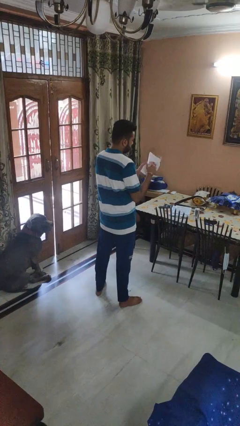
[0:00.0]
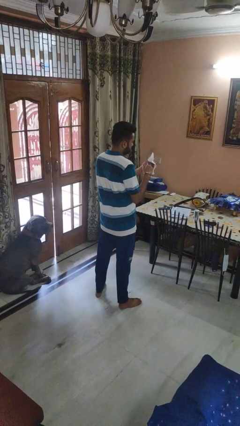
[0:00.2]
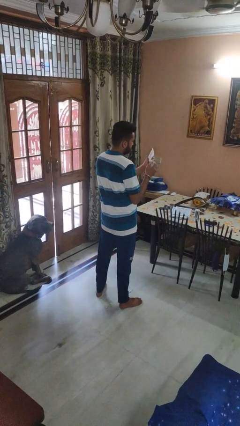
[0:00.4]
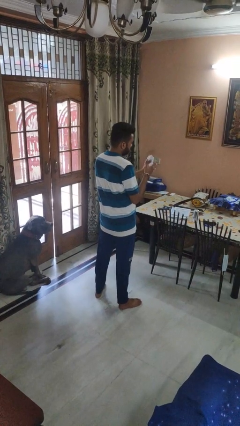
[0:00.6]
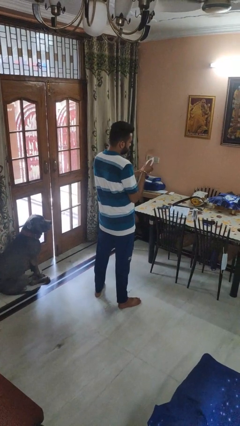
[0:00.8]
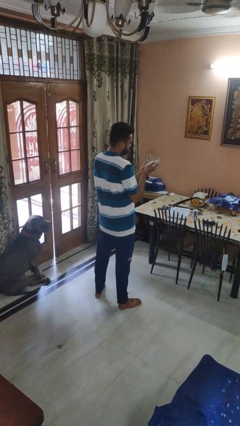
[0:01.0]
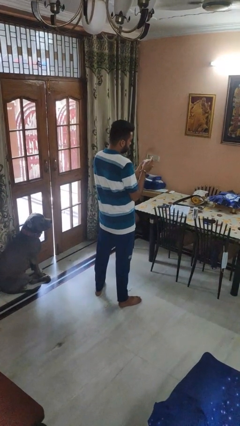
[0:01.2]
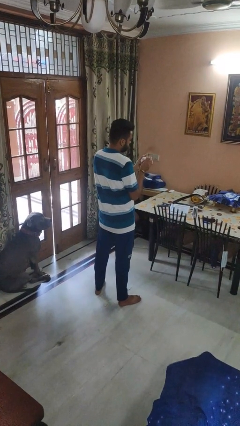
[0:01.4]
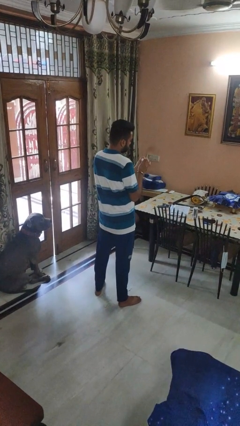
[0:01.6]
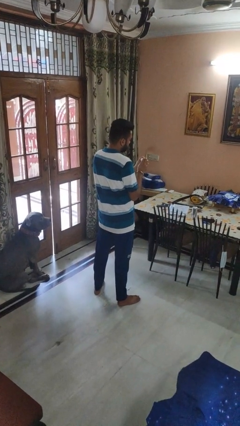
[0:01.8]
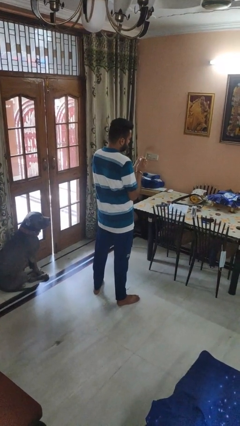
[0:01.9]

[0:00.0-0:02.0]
person crumples paper

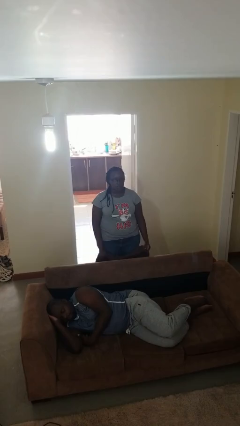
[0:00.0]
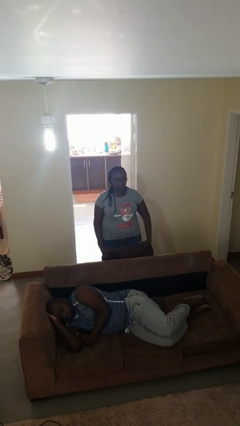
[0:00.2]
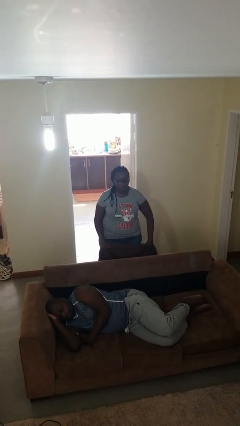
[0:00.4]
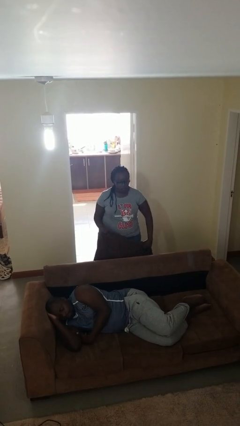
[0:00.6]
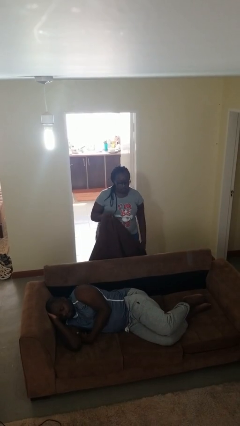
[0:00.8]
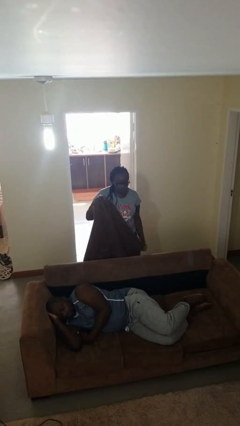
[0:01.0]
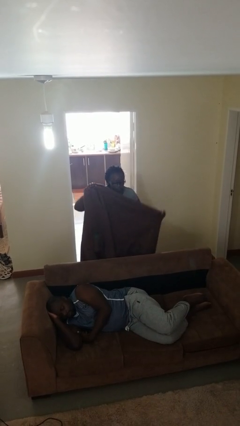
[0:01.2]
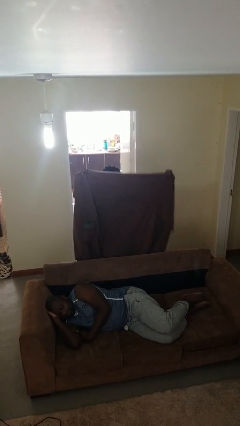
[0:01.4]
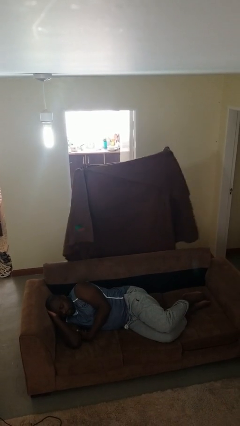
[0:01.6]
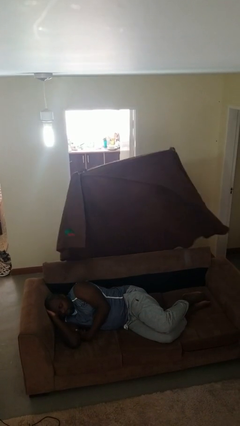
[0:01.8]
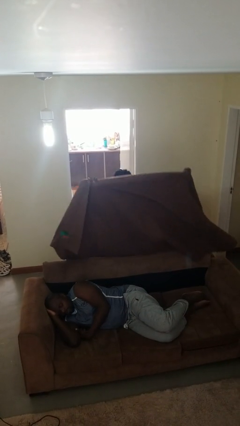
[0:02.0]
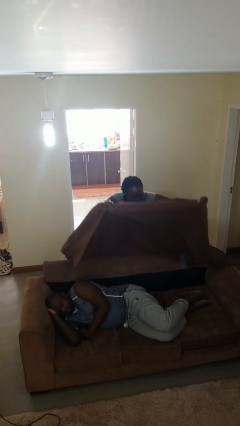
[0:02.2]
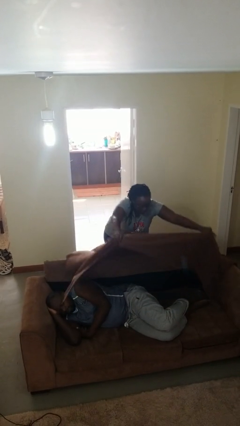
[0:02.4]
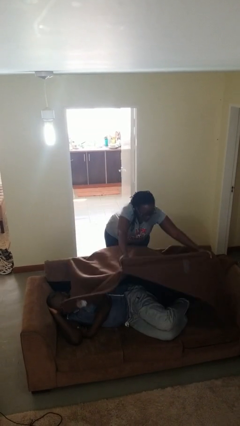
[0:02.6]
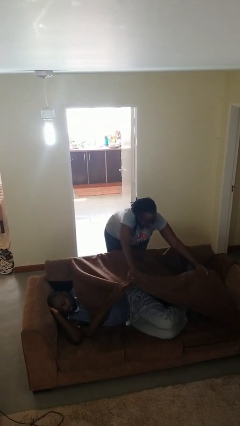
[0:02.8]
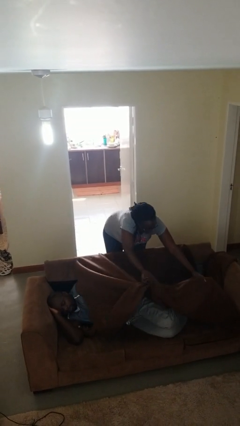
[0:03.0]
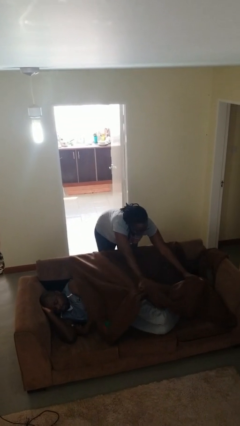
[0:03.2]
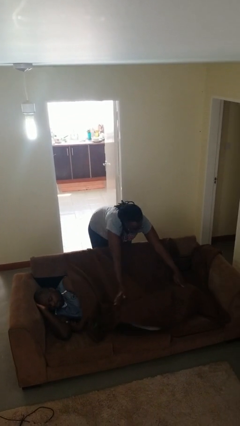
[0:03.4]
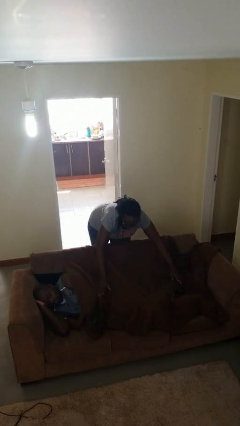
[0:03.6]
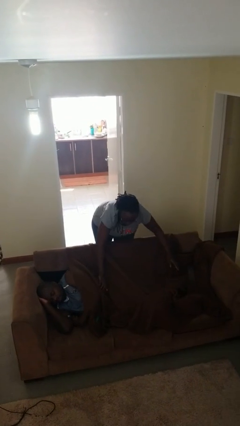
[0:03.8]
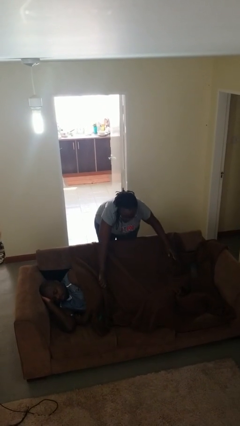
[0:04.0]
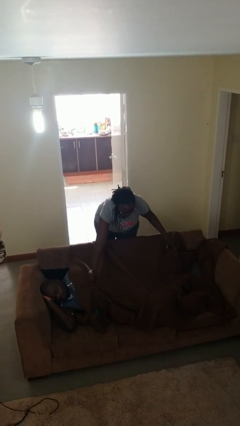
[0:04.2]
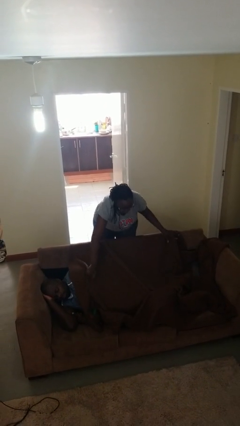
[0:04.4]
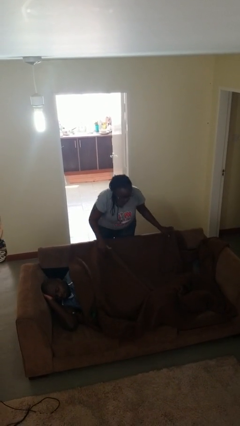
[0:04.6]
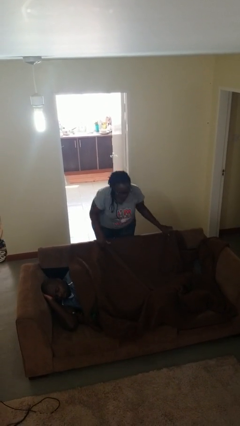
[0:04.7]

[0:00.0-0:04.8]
person covers friend with blanket

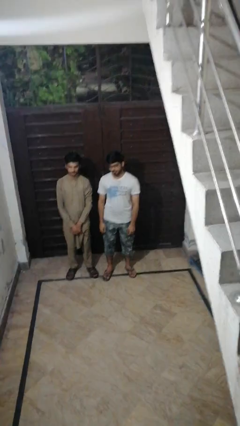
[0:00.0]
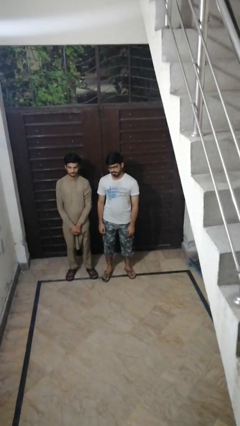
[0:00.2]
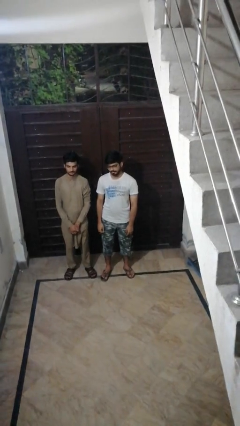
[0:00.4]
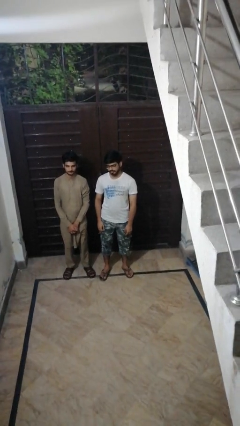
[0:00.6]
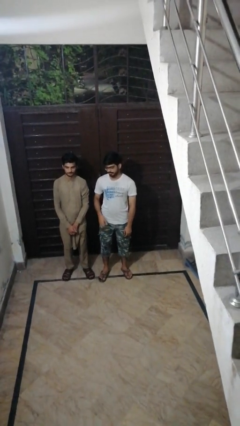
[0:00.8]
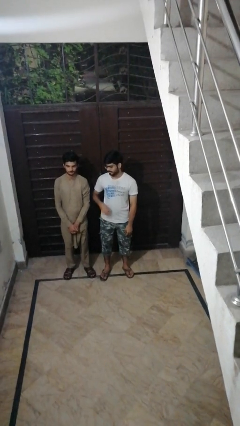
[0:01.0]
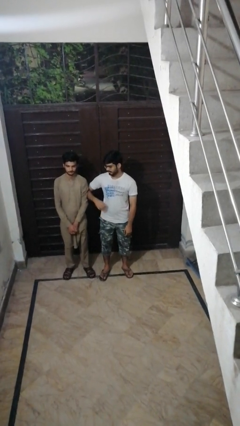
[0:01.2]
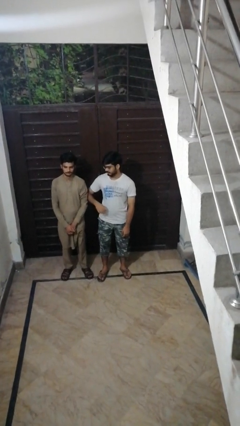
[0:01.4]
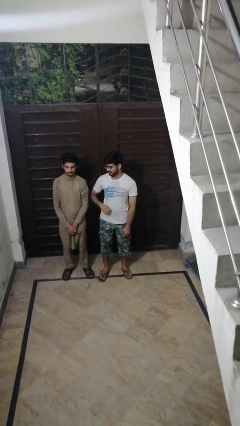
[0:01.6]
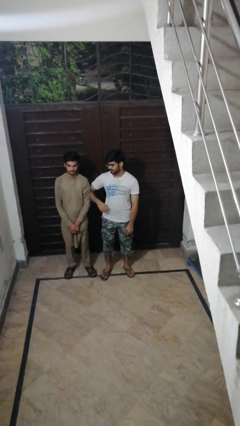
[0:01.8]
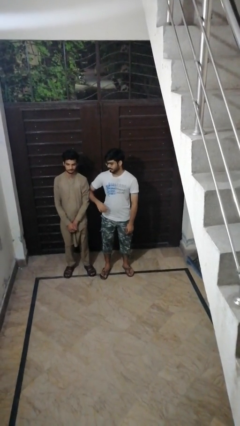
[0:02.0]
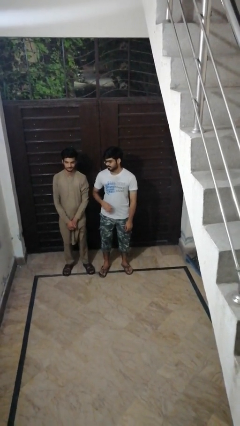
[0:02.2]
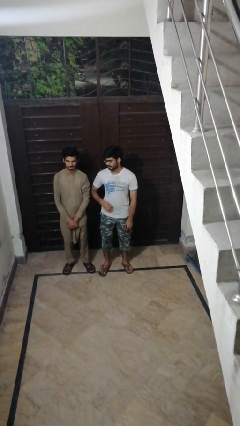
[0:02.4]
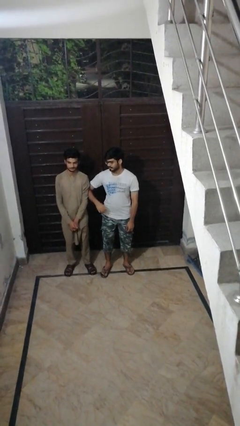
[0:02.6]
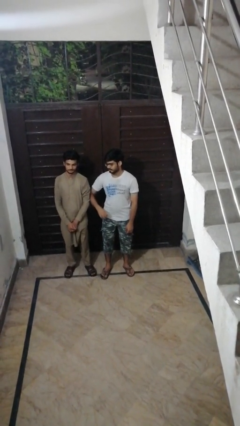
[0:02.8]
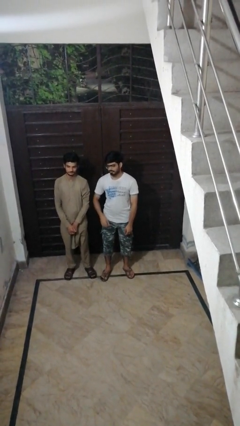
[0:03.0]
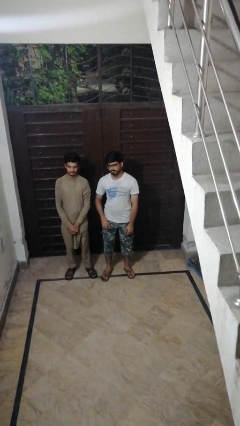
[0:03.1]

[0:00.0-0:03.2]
person nudges person with elbow

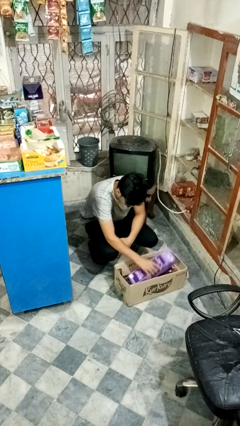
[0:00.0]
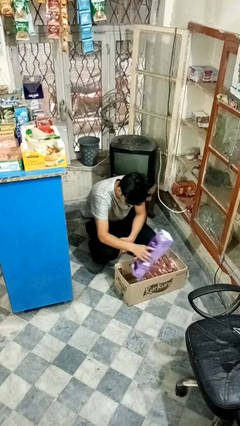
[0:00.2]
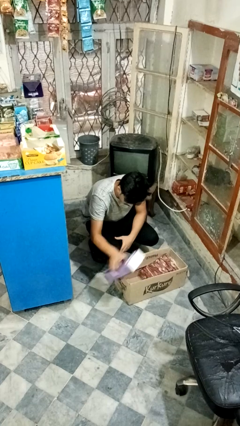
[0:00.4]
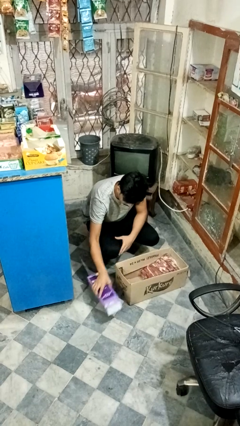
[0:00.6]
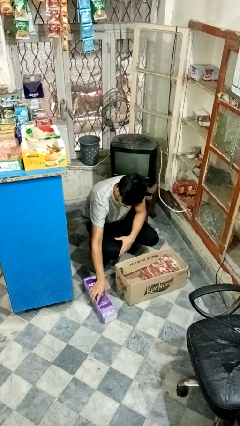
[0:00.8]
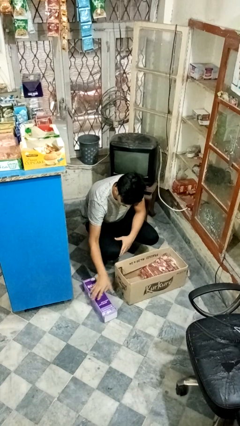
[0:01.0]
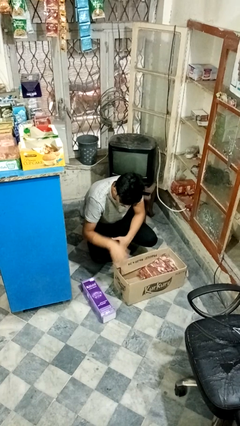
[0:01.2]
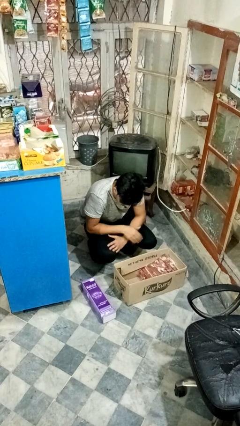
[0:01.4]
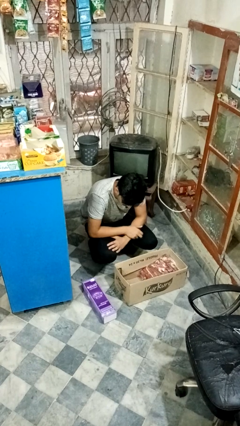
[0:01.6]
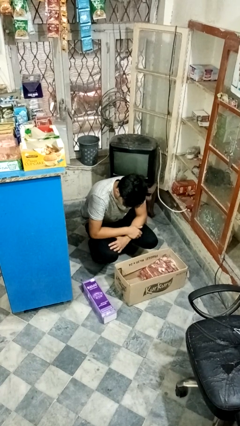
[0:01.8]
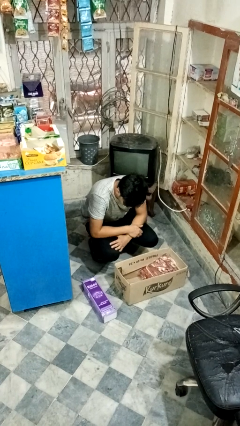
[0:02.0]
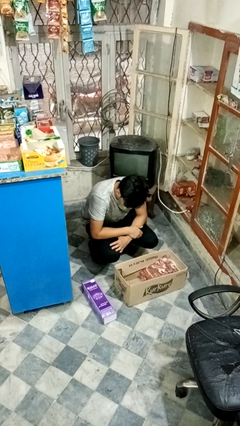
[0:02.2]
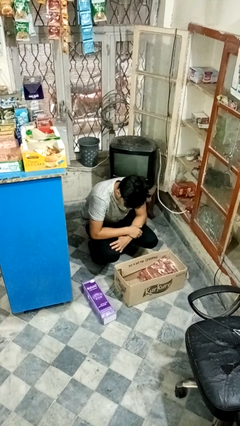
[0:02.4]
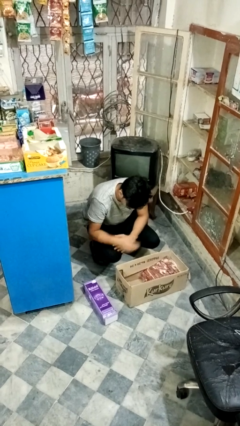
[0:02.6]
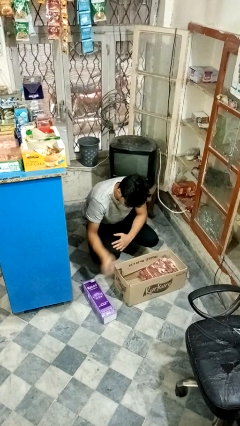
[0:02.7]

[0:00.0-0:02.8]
person takes object from box

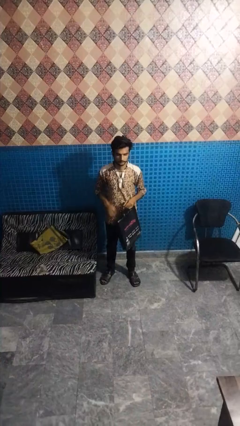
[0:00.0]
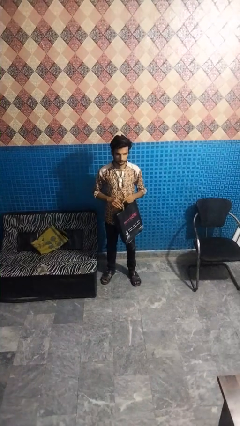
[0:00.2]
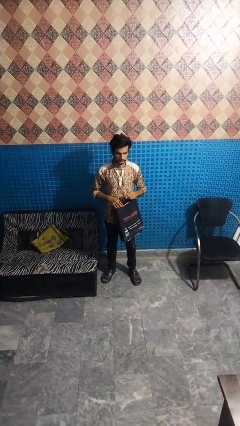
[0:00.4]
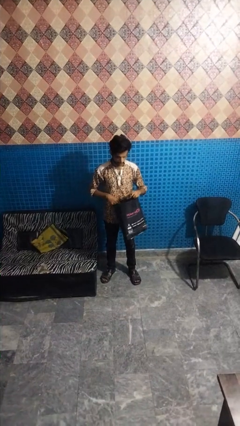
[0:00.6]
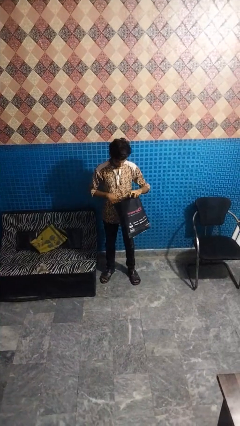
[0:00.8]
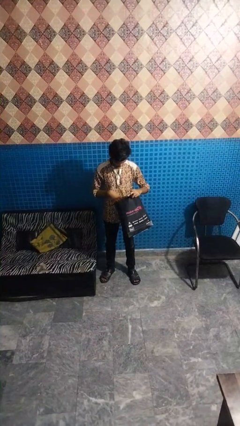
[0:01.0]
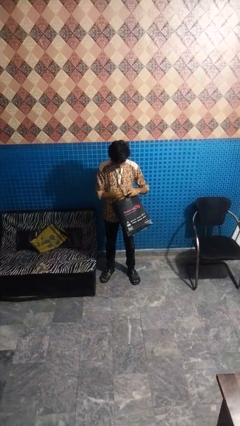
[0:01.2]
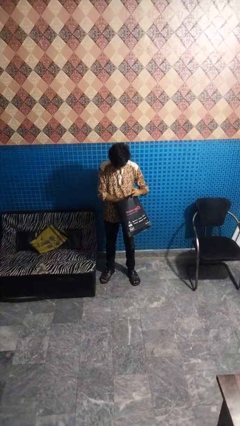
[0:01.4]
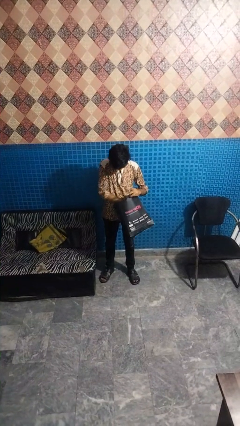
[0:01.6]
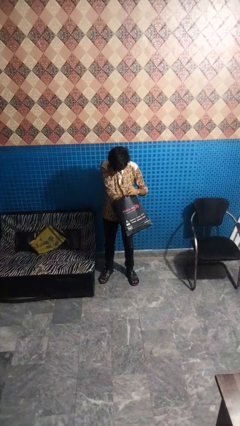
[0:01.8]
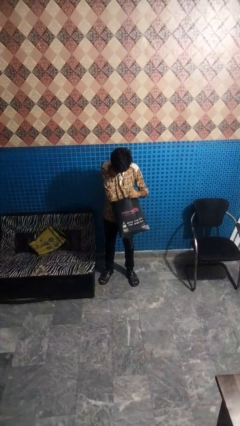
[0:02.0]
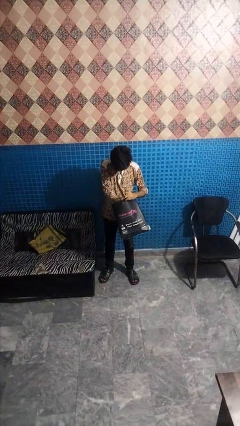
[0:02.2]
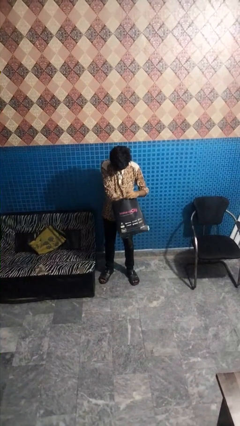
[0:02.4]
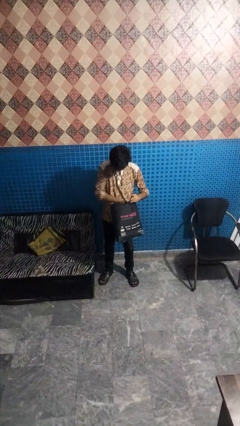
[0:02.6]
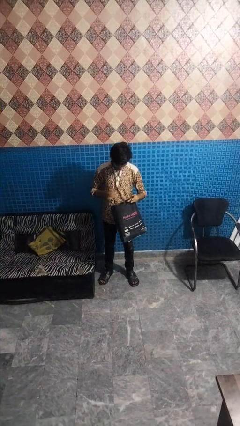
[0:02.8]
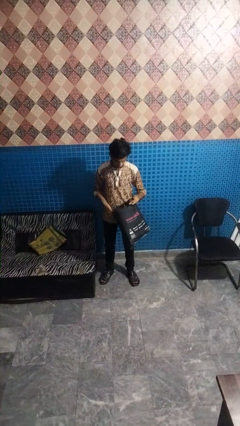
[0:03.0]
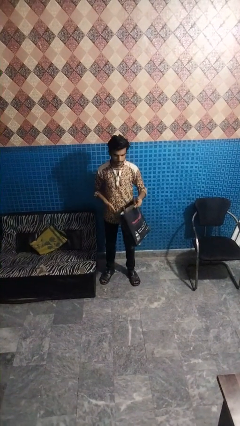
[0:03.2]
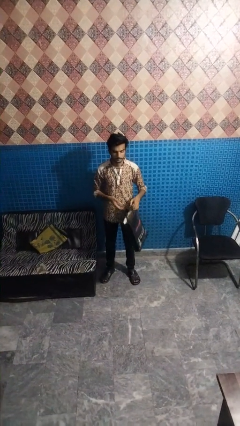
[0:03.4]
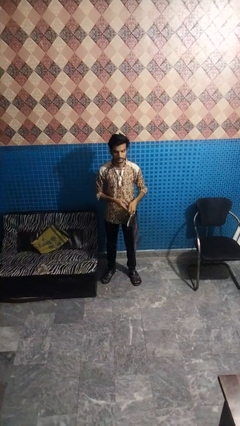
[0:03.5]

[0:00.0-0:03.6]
person searches in bag

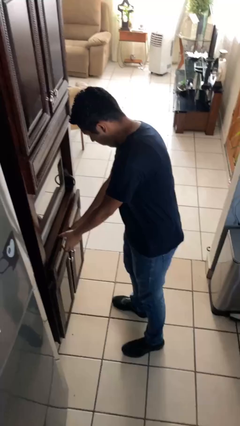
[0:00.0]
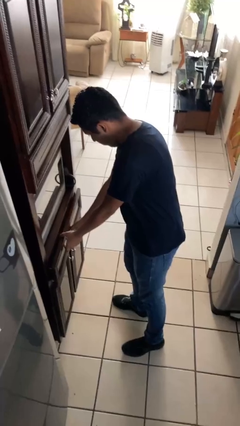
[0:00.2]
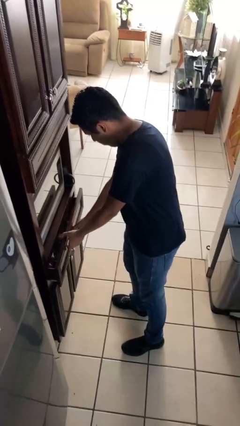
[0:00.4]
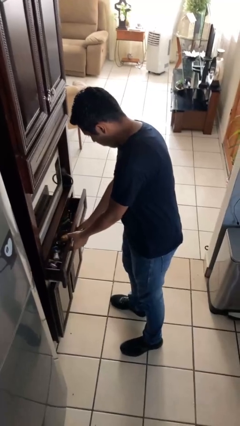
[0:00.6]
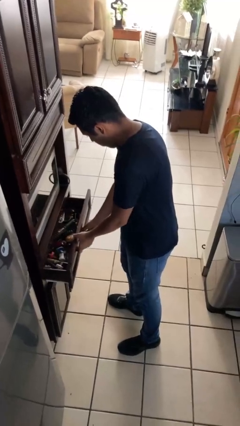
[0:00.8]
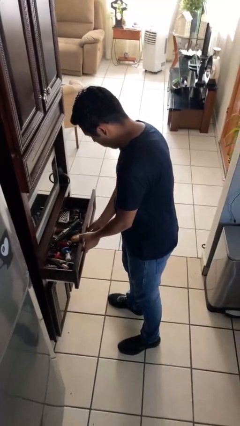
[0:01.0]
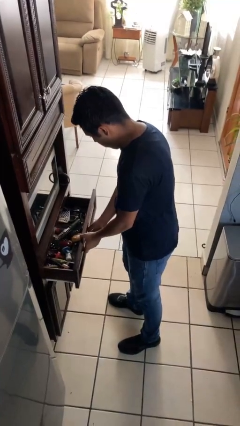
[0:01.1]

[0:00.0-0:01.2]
person opens kitchen drawer
